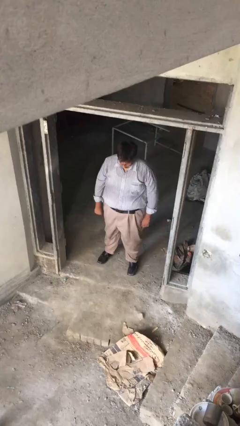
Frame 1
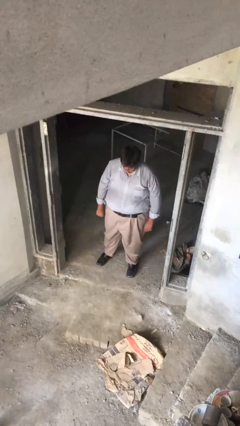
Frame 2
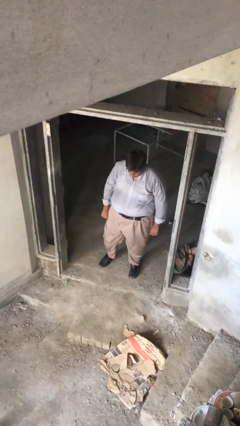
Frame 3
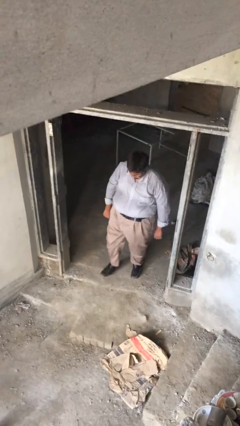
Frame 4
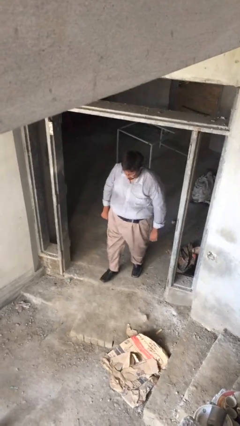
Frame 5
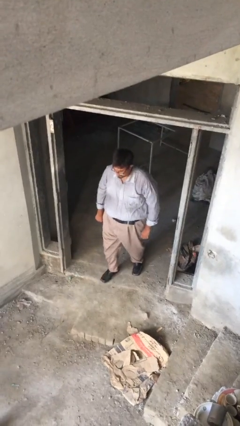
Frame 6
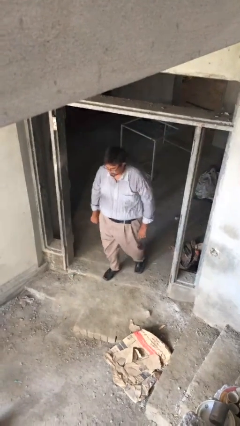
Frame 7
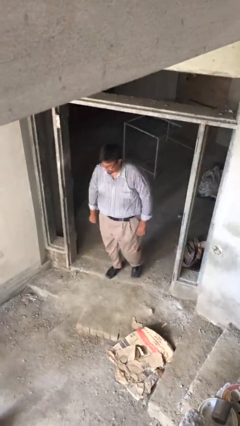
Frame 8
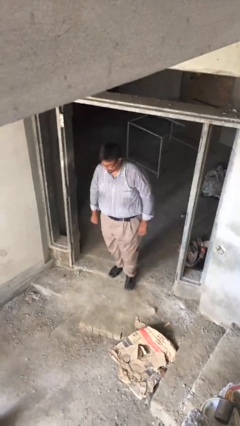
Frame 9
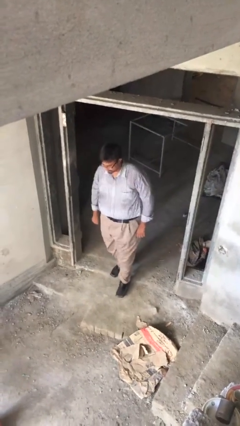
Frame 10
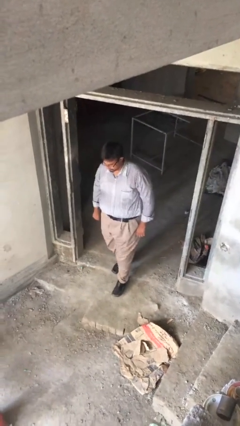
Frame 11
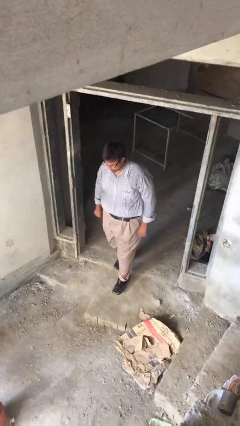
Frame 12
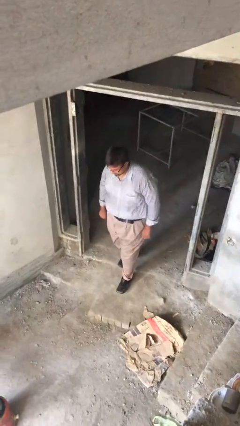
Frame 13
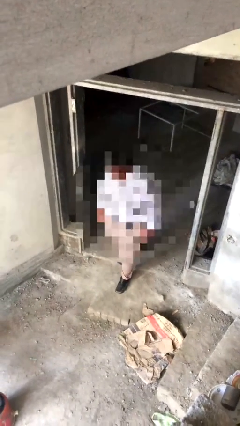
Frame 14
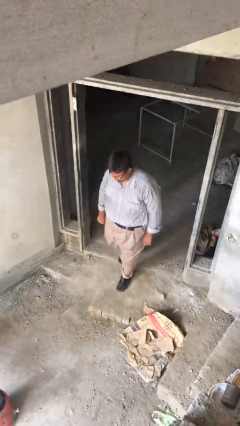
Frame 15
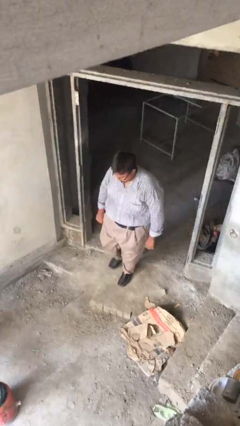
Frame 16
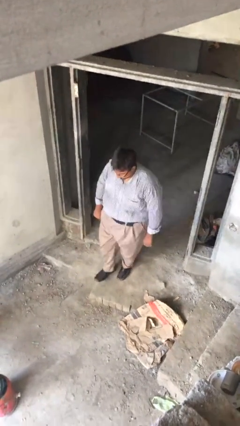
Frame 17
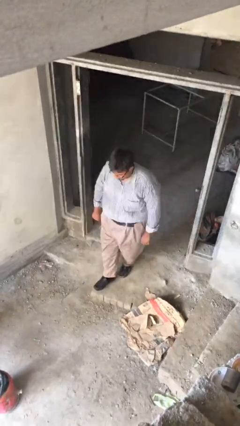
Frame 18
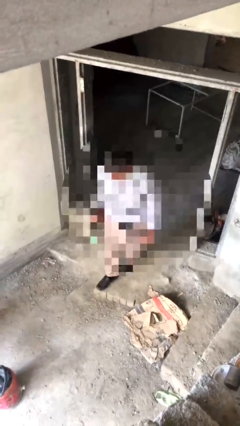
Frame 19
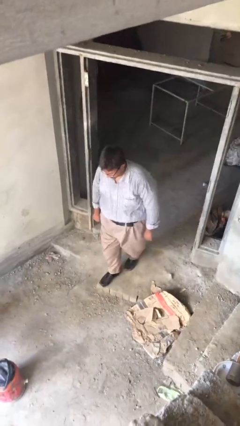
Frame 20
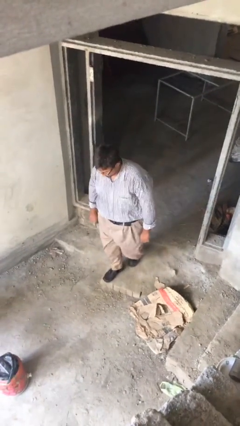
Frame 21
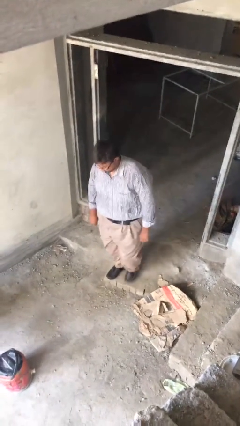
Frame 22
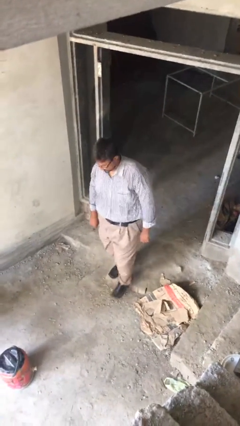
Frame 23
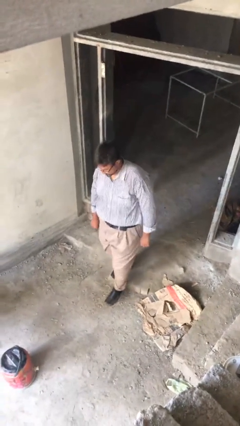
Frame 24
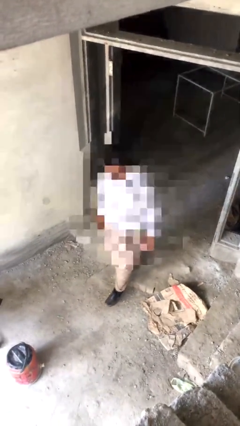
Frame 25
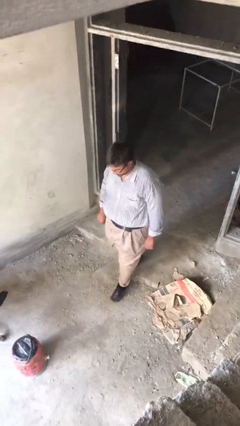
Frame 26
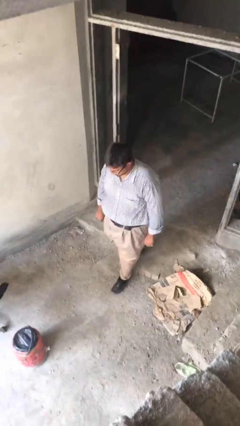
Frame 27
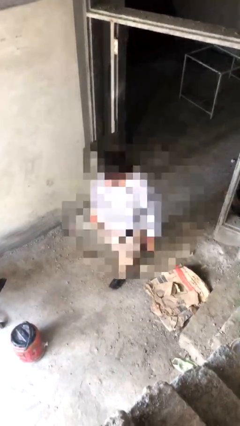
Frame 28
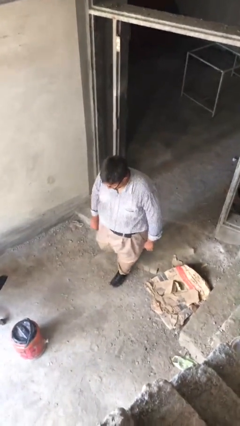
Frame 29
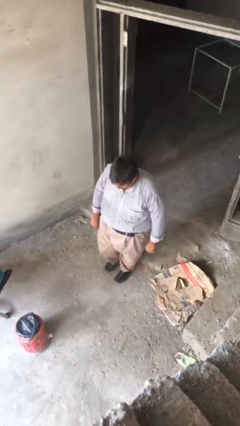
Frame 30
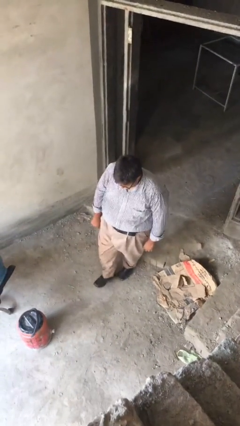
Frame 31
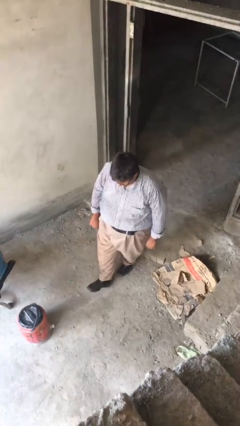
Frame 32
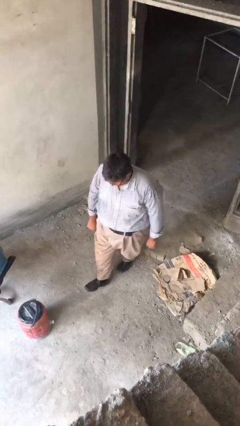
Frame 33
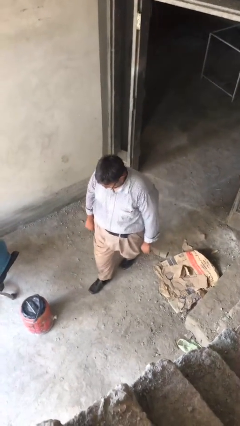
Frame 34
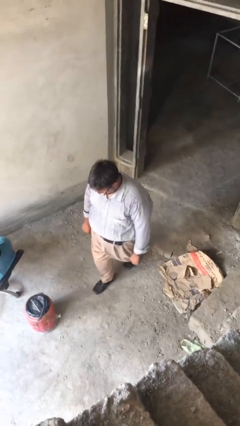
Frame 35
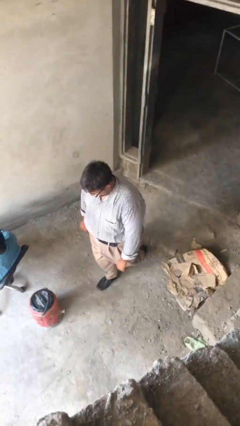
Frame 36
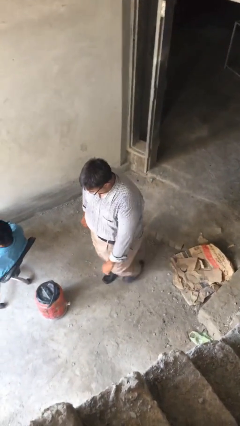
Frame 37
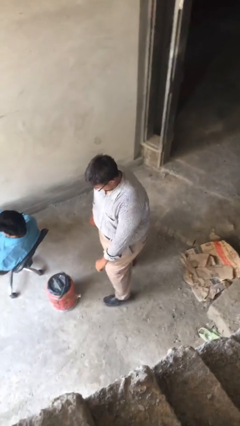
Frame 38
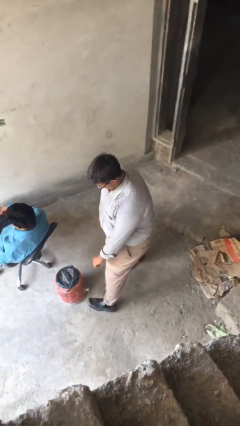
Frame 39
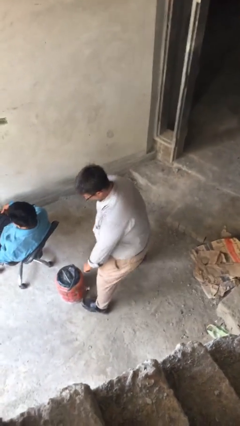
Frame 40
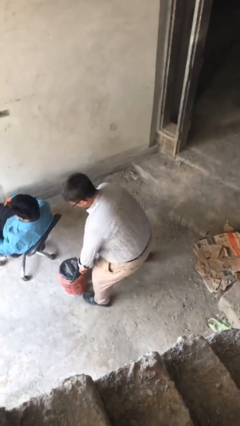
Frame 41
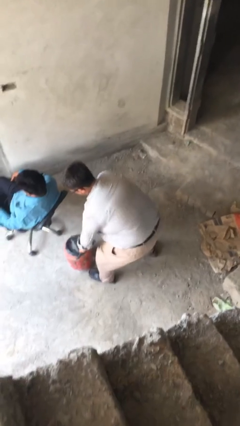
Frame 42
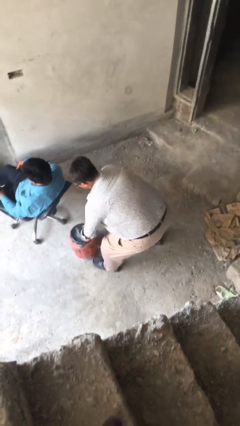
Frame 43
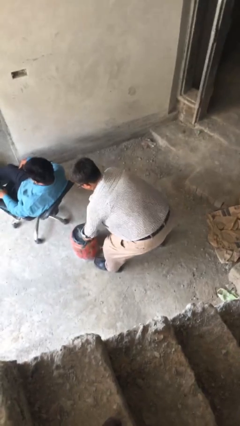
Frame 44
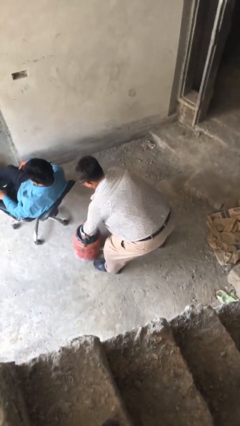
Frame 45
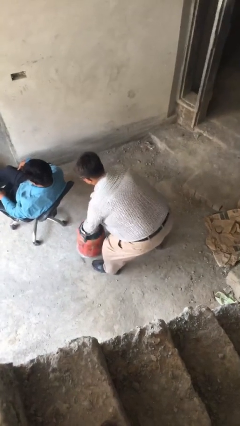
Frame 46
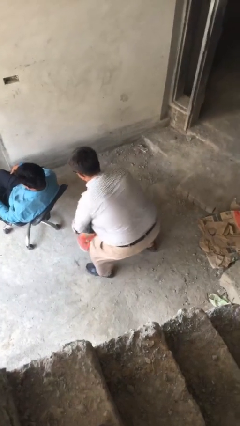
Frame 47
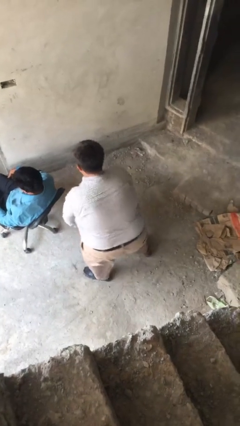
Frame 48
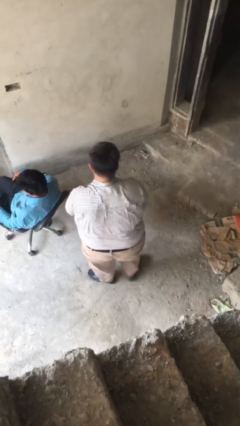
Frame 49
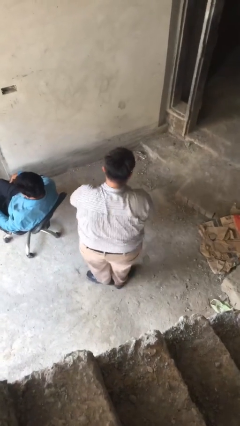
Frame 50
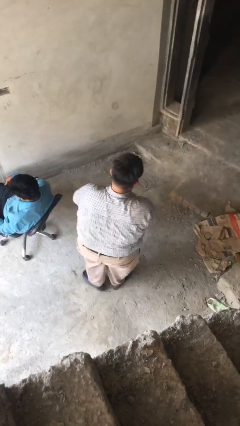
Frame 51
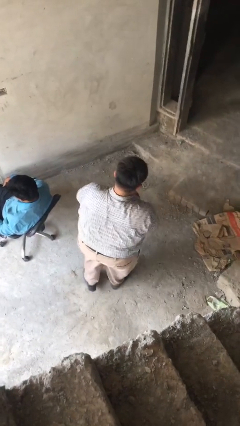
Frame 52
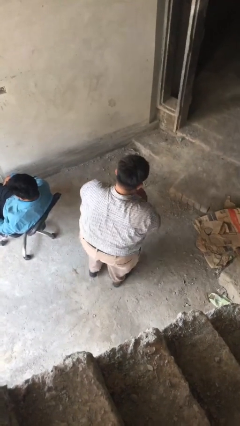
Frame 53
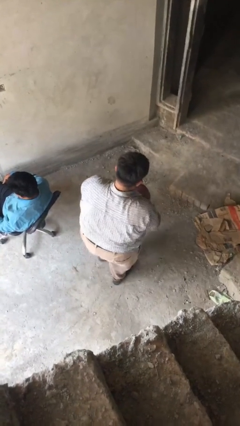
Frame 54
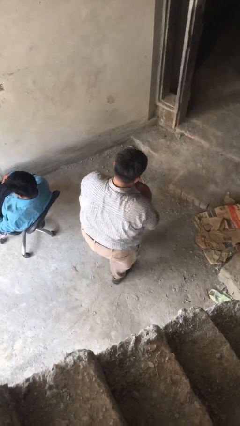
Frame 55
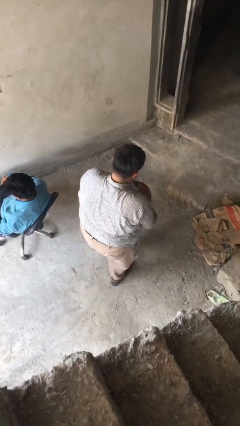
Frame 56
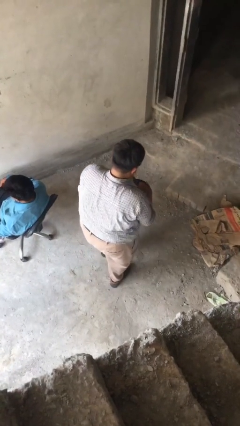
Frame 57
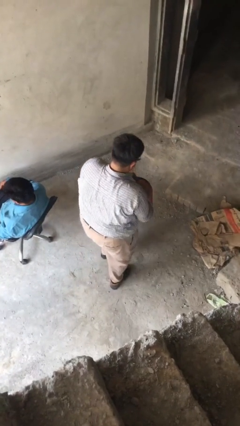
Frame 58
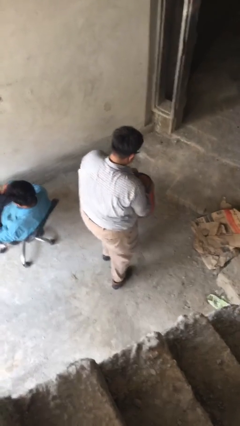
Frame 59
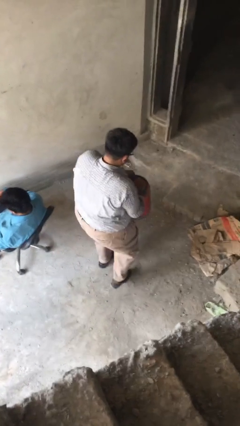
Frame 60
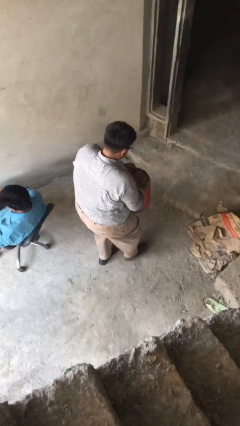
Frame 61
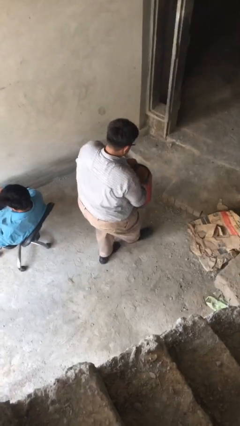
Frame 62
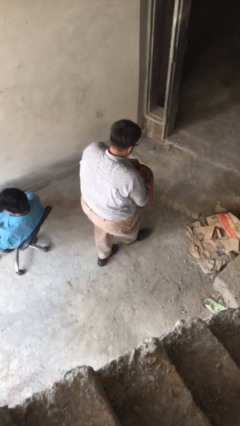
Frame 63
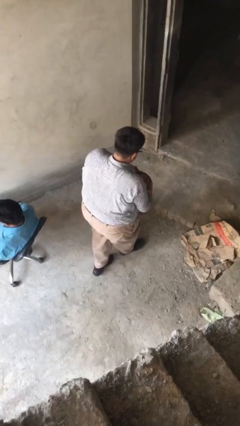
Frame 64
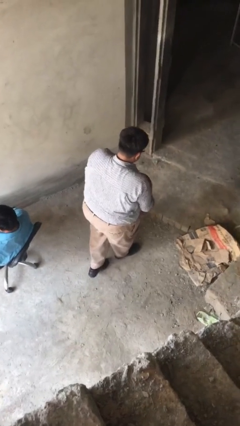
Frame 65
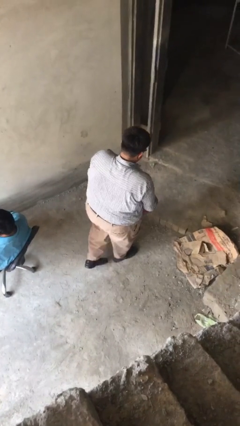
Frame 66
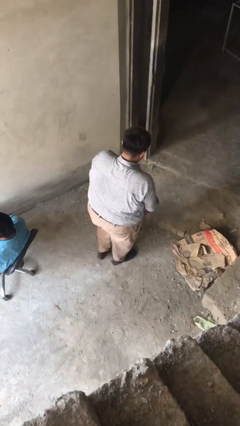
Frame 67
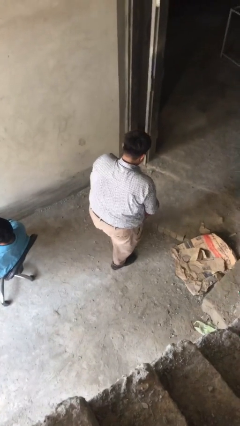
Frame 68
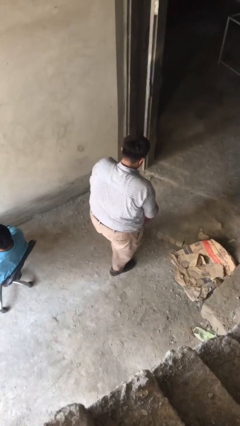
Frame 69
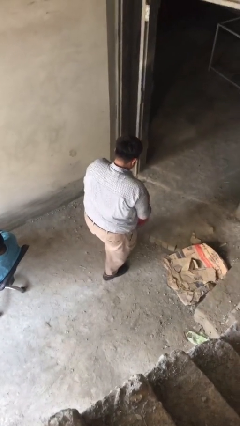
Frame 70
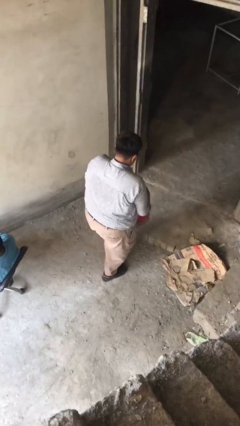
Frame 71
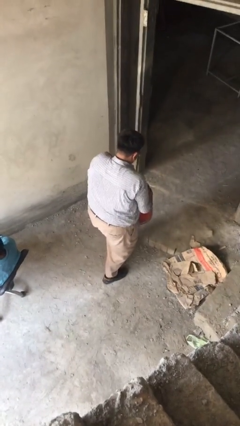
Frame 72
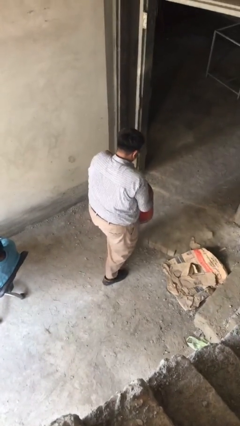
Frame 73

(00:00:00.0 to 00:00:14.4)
person steals object from person

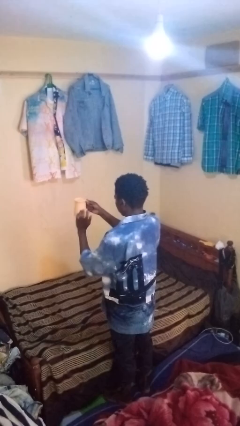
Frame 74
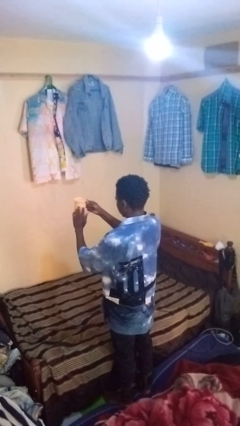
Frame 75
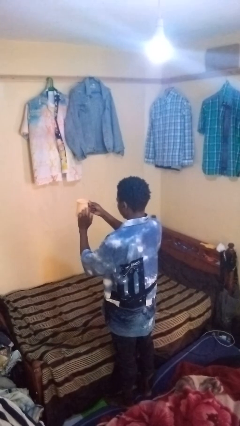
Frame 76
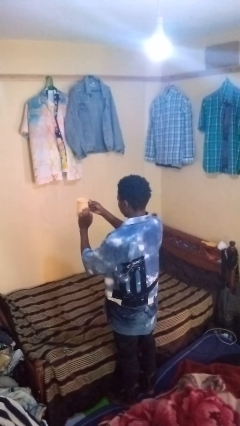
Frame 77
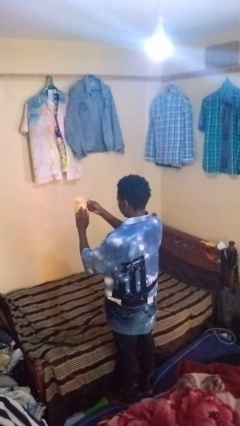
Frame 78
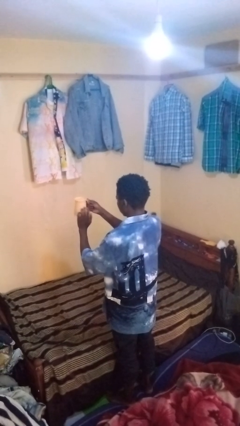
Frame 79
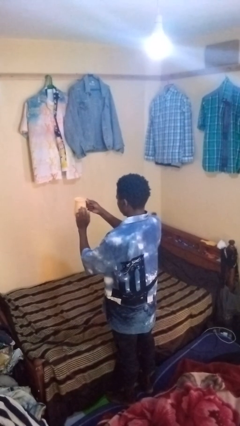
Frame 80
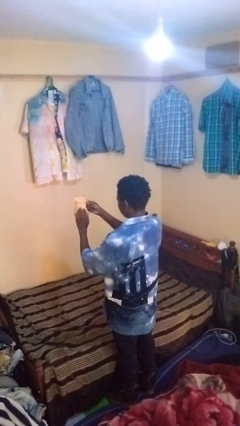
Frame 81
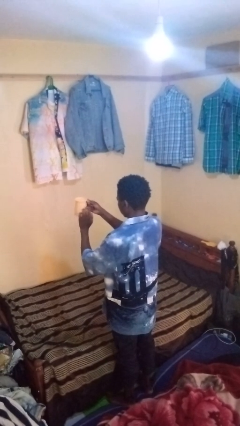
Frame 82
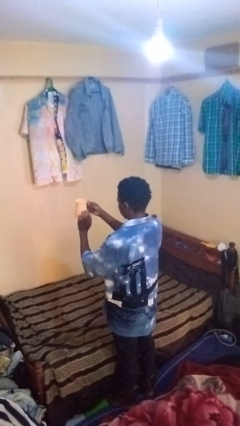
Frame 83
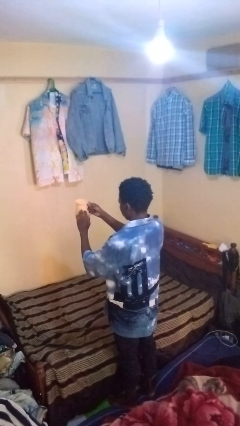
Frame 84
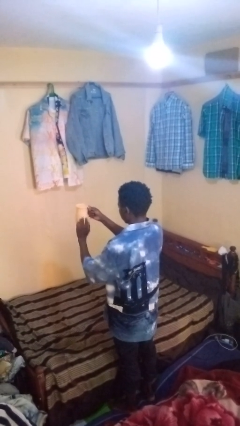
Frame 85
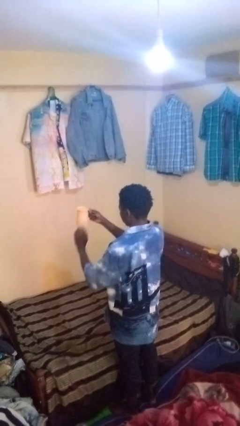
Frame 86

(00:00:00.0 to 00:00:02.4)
person taps object with finger

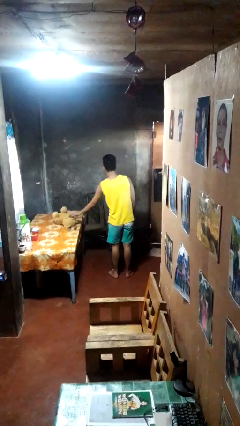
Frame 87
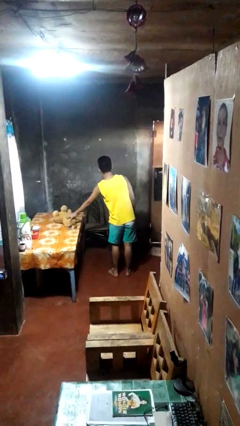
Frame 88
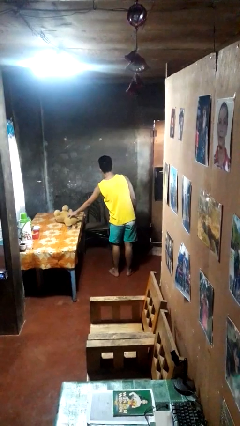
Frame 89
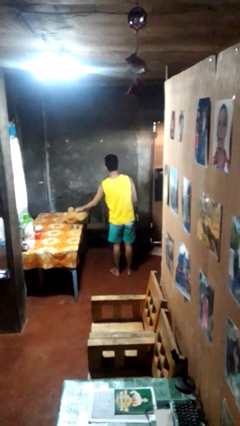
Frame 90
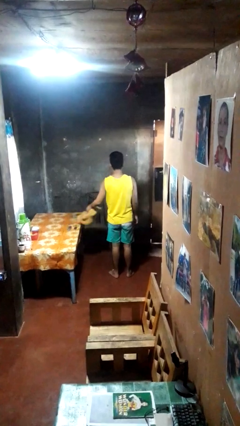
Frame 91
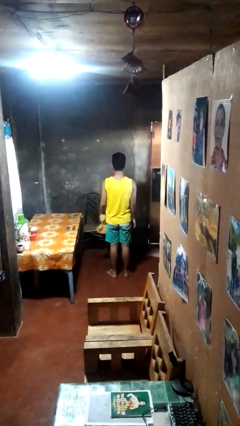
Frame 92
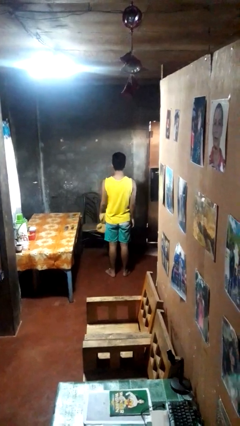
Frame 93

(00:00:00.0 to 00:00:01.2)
person picks up object from table
